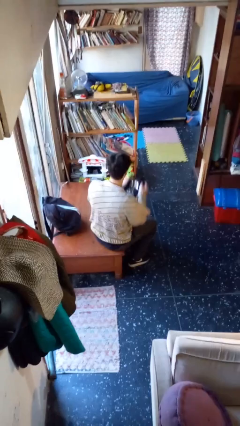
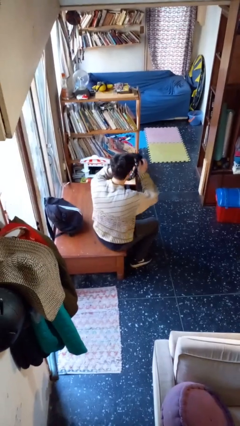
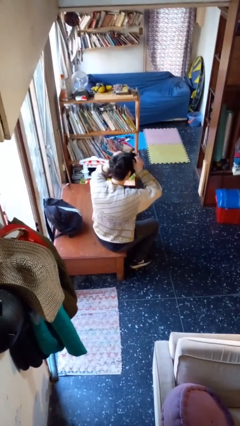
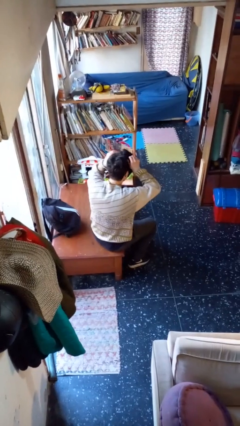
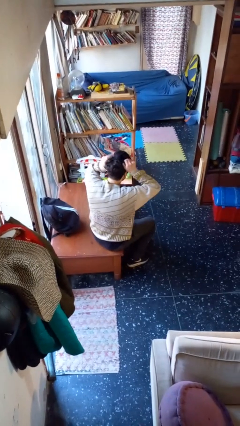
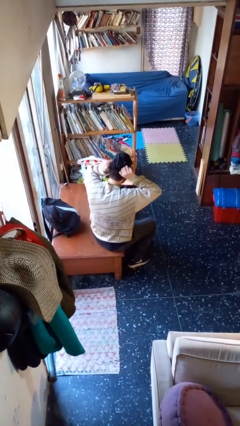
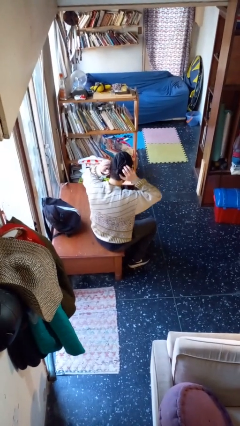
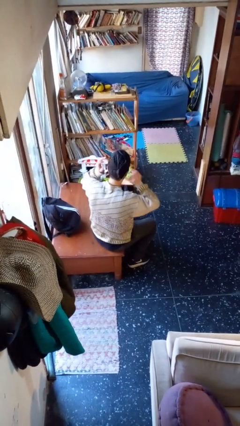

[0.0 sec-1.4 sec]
person puts on facemask

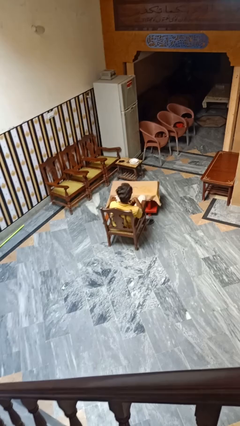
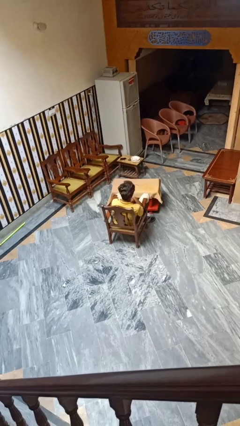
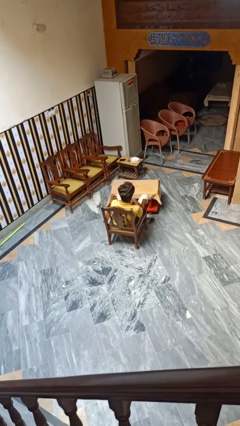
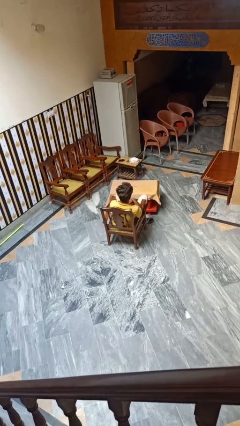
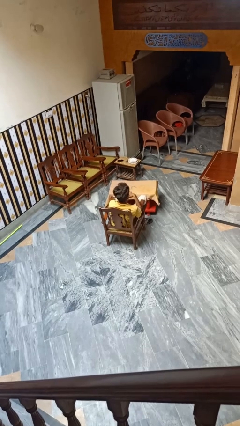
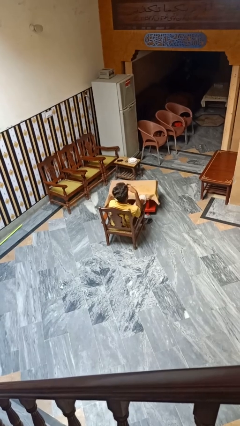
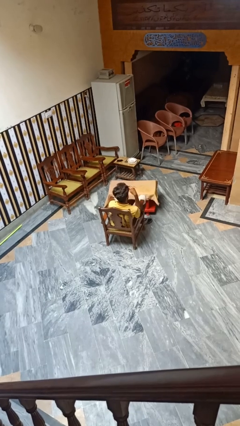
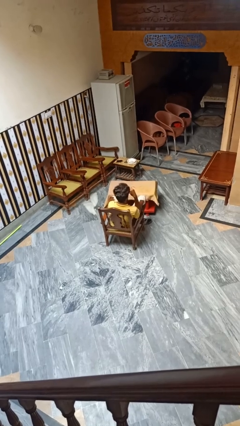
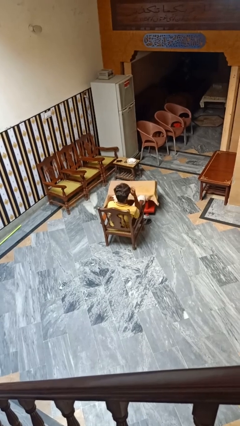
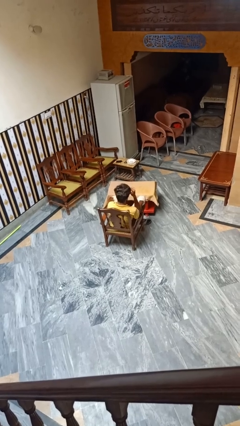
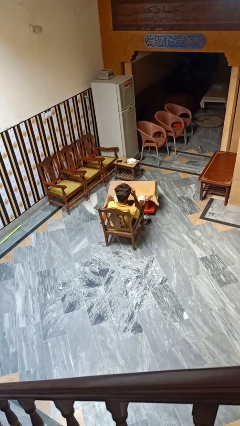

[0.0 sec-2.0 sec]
person clips fingernails

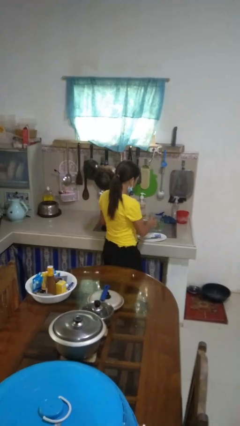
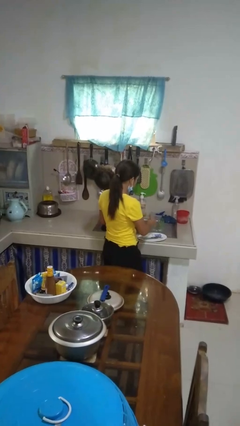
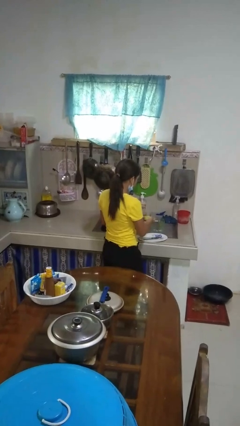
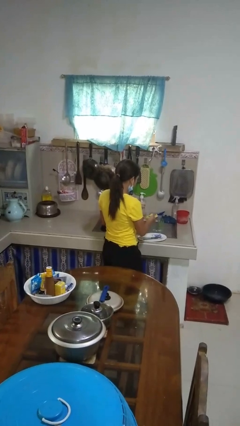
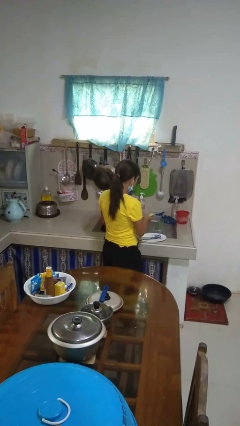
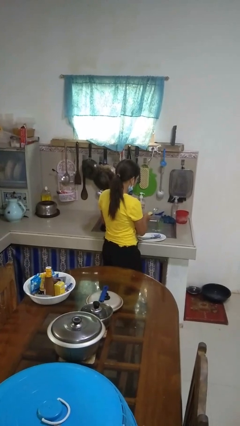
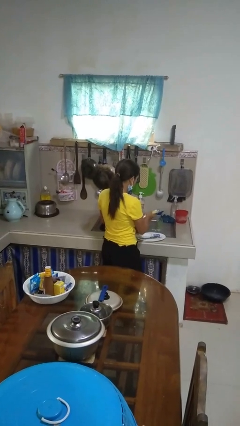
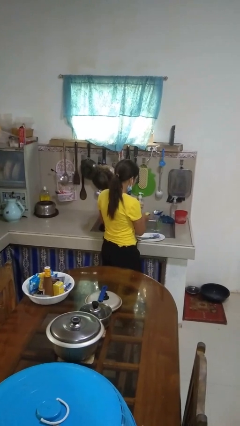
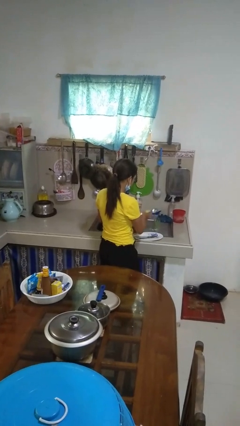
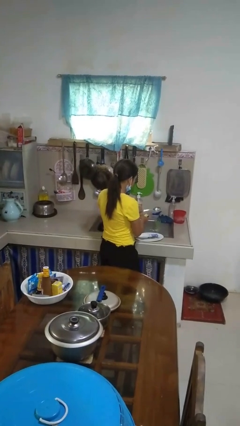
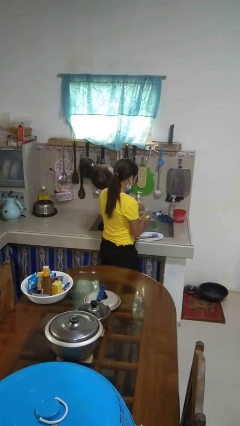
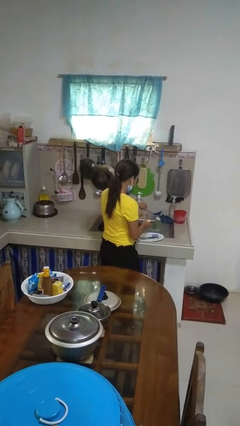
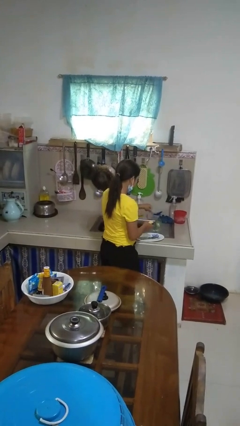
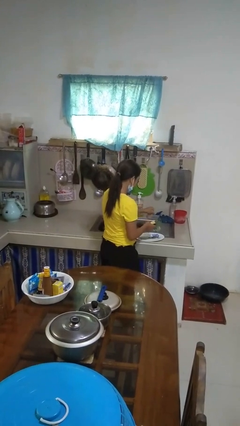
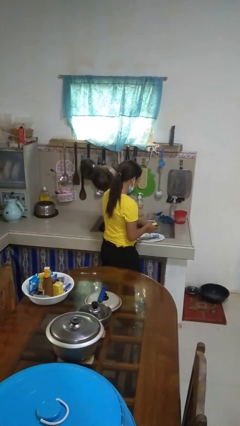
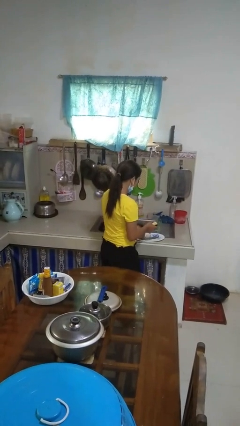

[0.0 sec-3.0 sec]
person washes dish

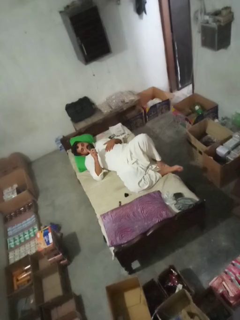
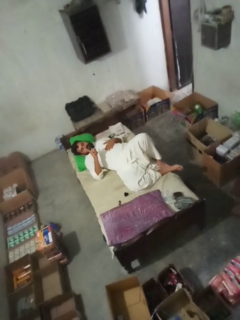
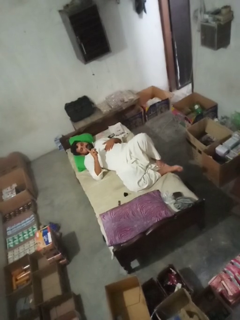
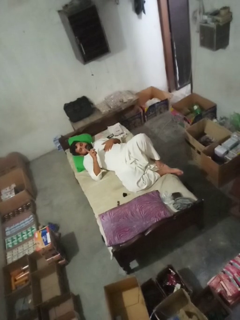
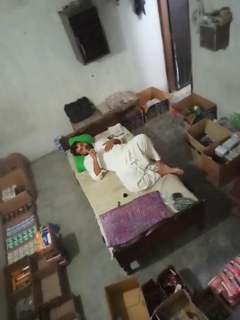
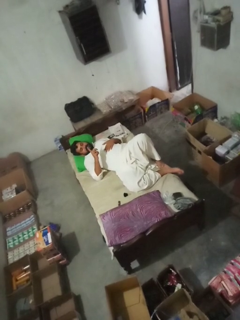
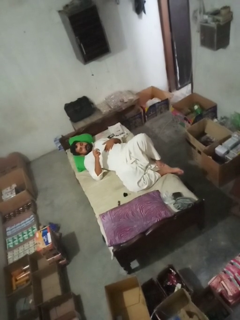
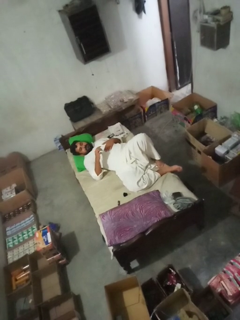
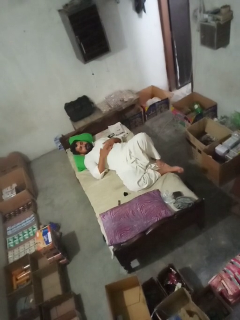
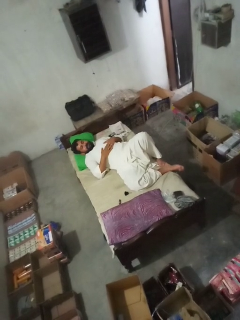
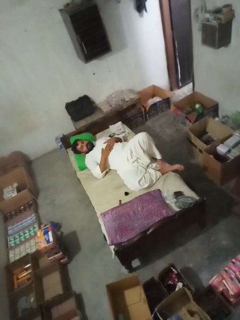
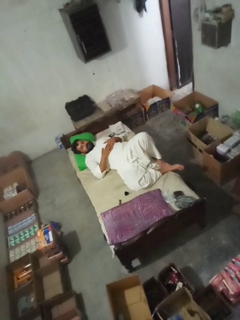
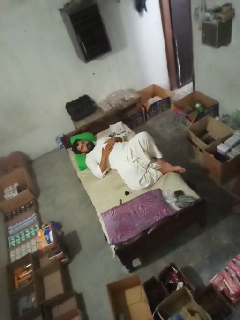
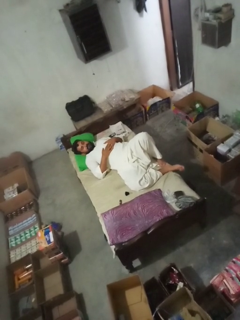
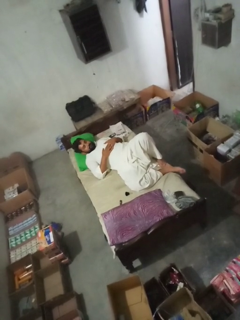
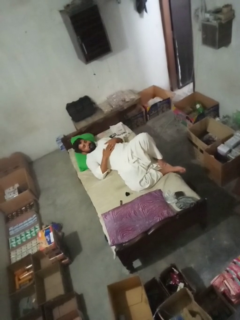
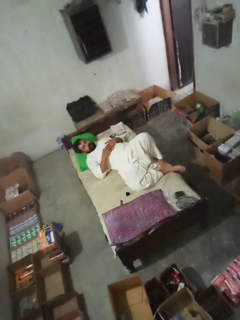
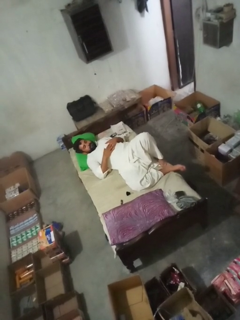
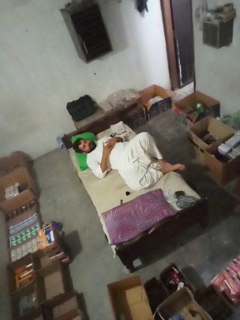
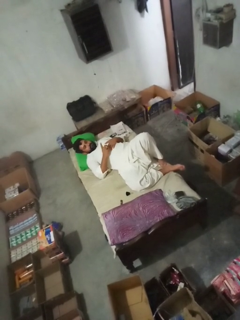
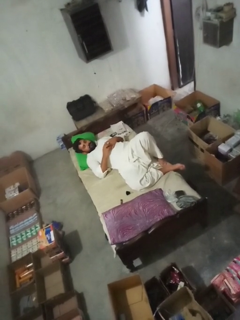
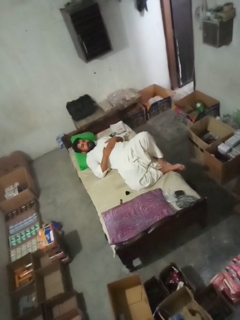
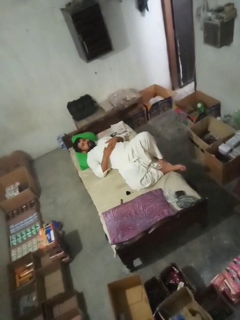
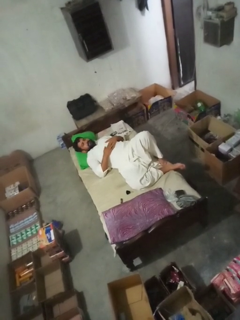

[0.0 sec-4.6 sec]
person shakes head

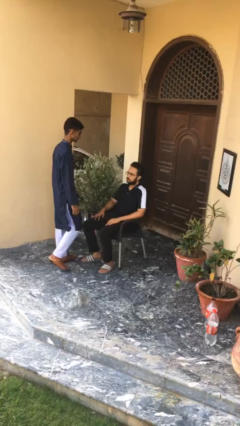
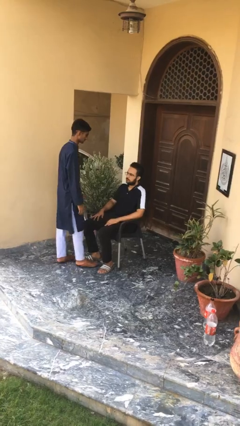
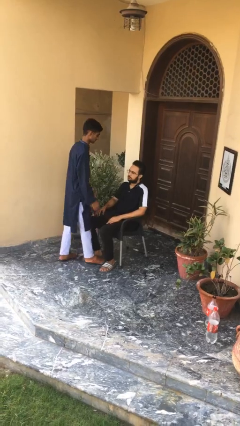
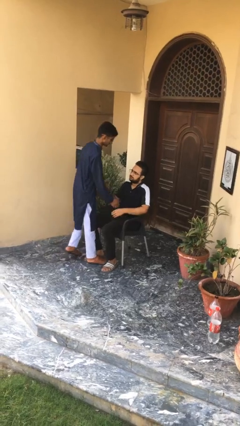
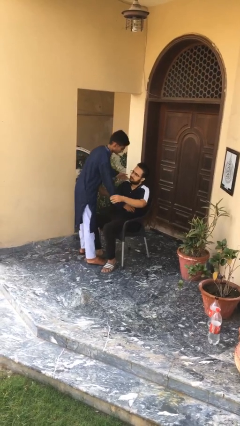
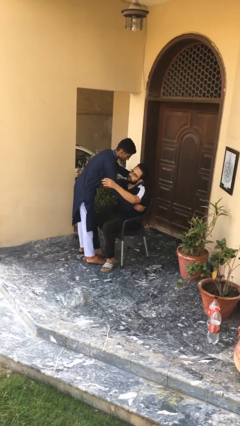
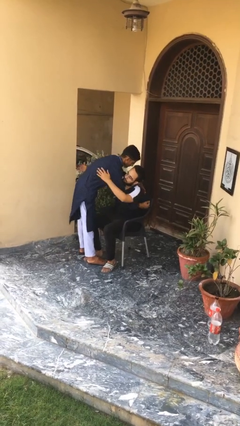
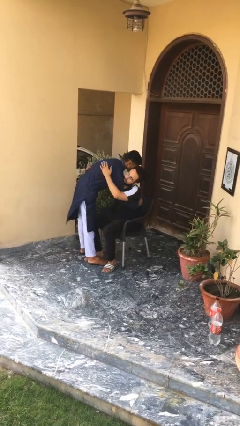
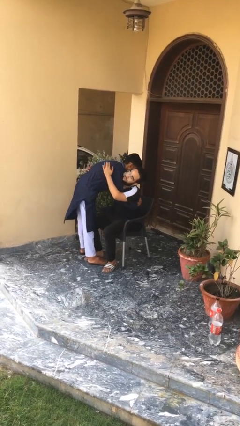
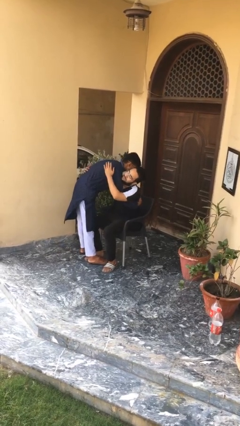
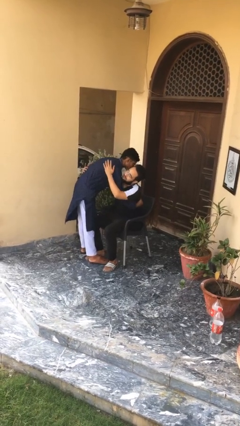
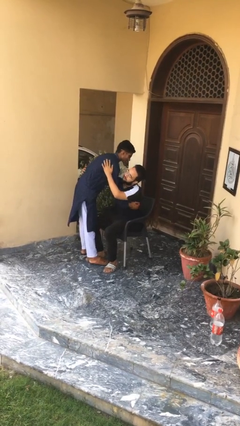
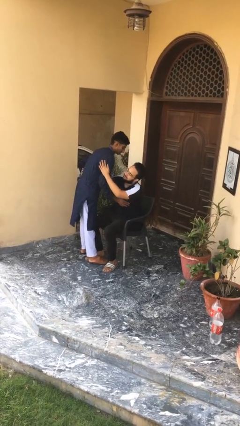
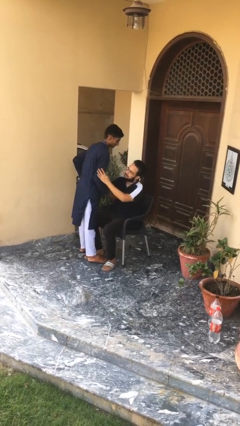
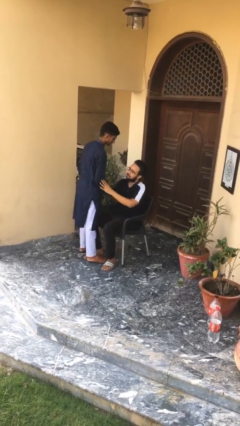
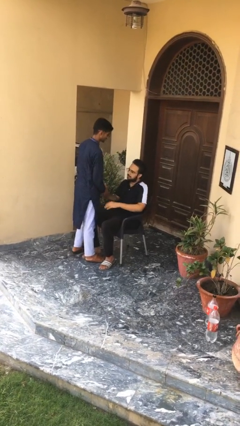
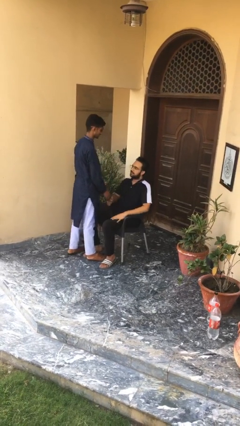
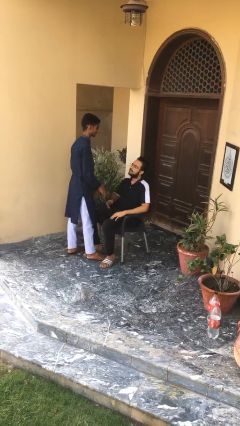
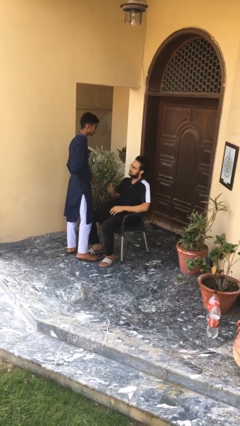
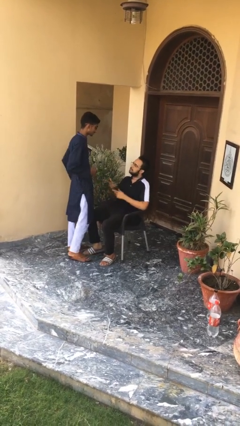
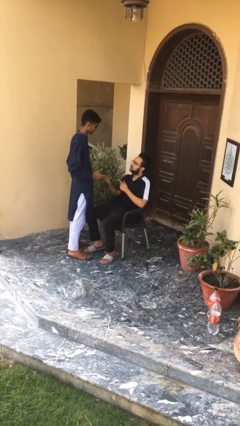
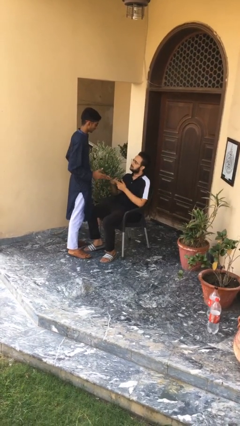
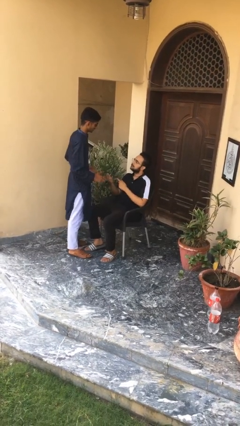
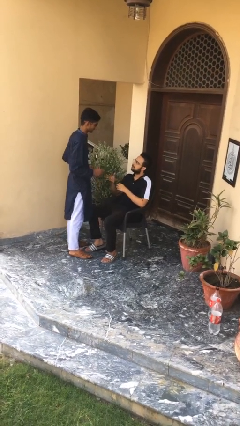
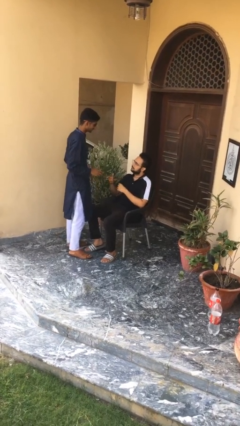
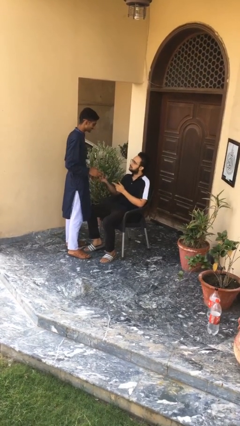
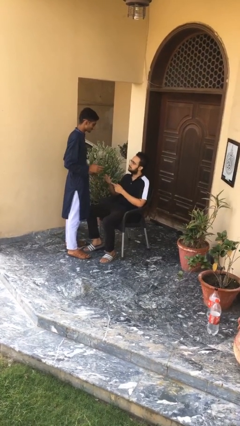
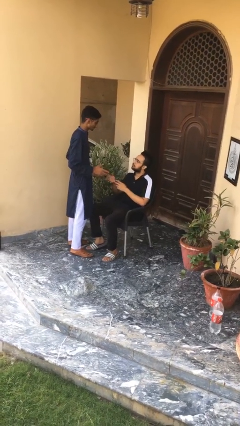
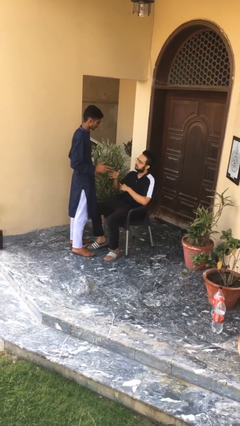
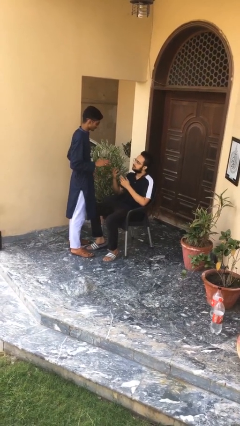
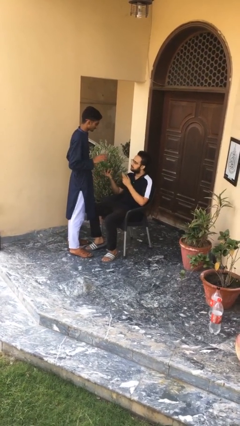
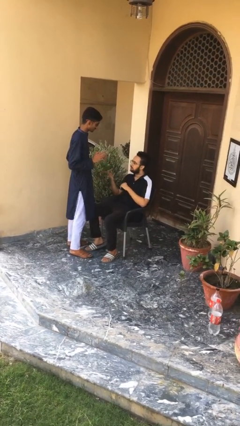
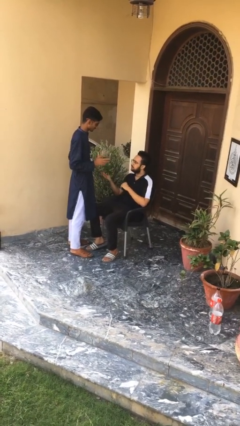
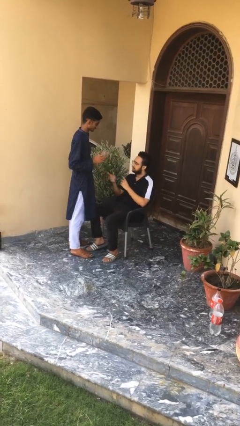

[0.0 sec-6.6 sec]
person embraces person

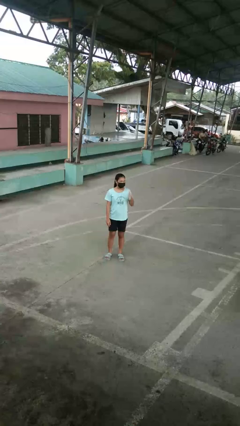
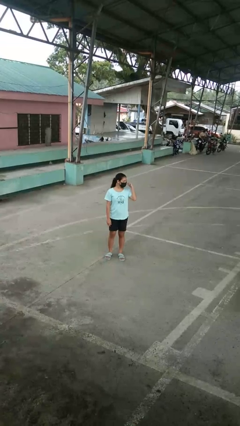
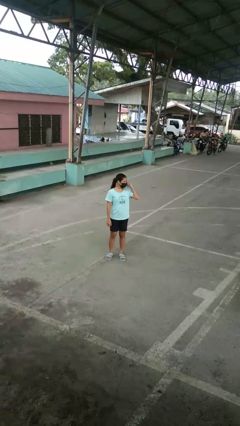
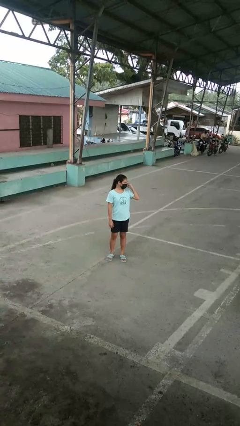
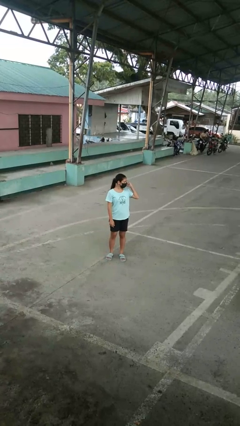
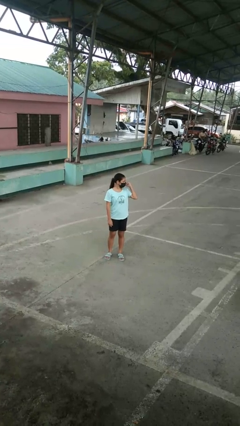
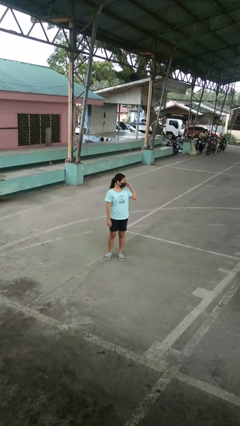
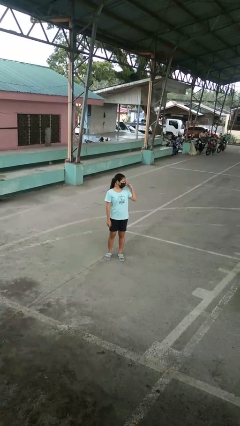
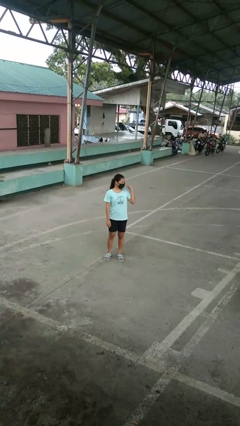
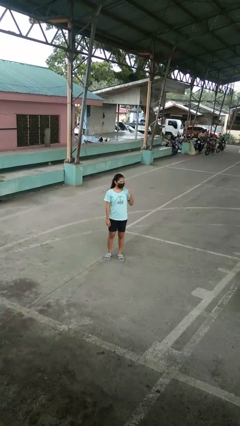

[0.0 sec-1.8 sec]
person gestures behind me
